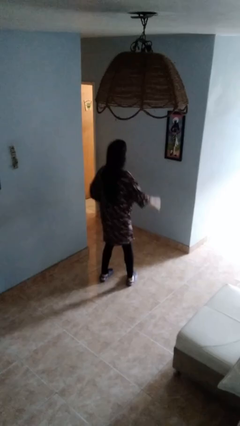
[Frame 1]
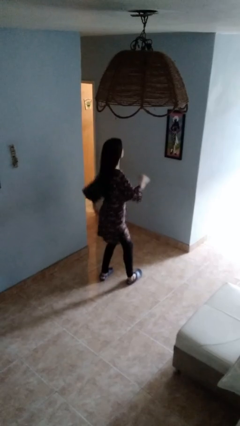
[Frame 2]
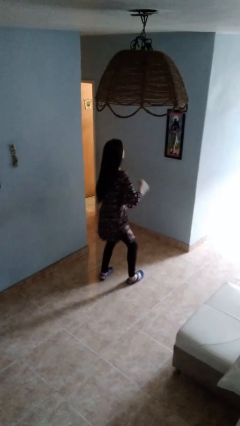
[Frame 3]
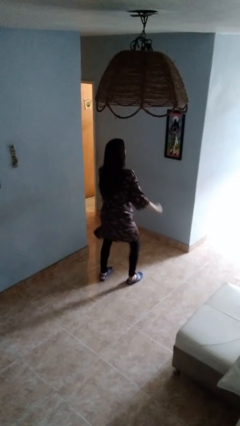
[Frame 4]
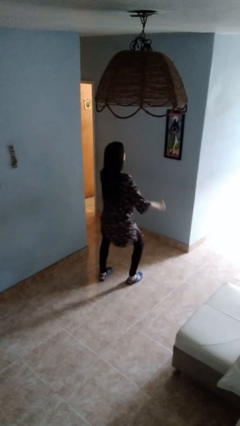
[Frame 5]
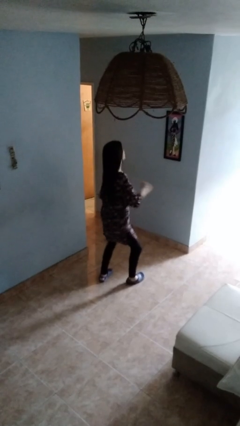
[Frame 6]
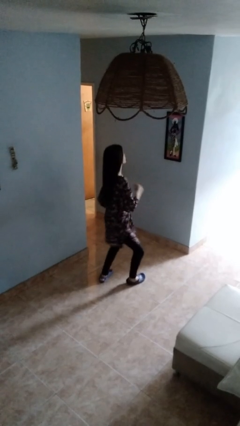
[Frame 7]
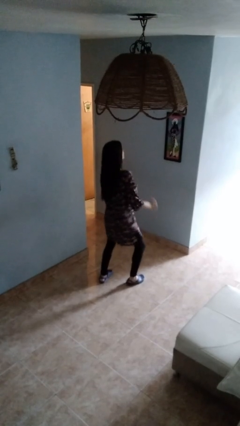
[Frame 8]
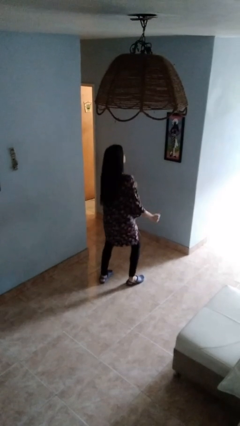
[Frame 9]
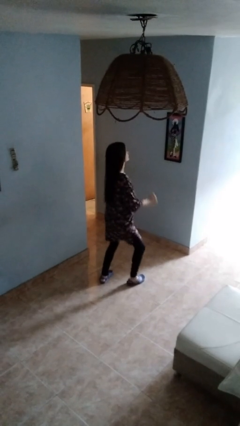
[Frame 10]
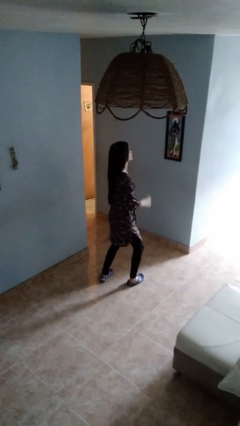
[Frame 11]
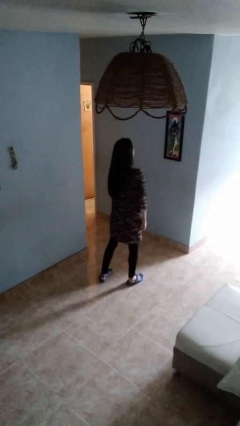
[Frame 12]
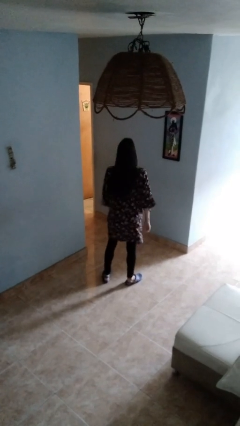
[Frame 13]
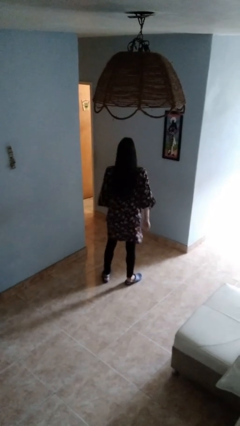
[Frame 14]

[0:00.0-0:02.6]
person dances in place

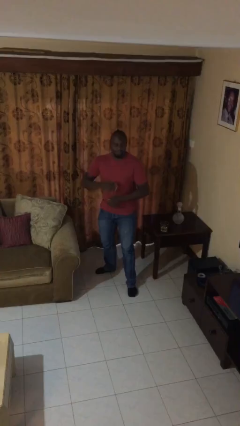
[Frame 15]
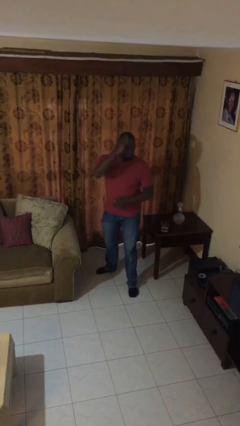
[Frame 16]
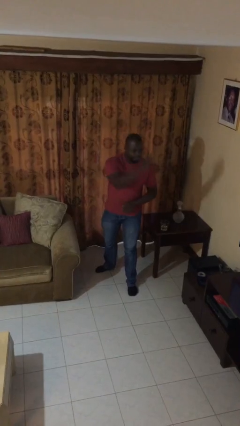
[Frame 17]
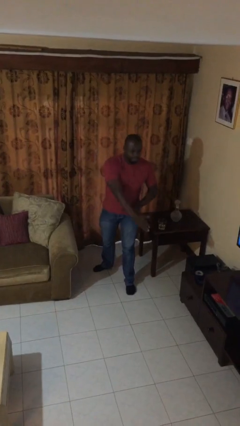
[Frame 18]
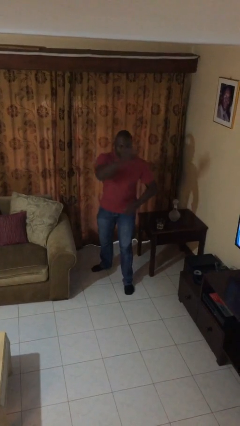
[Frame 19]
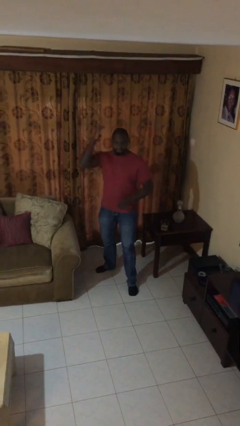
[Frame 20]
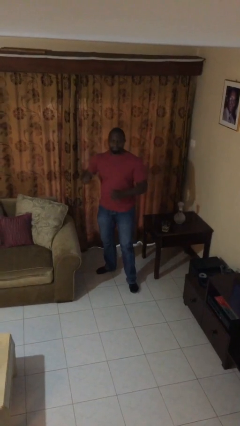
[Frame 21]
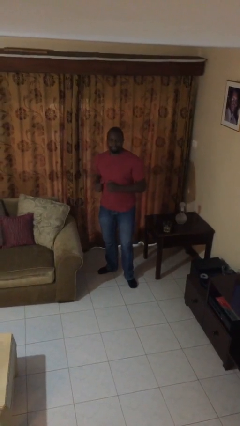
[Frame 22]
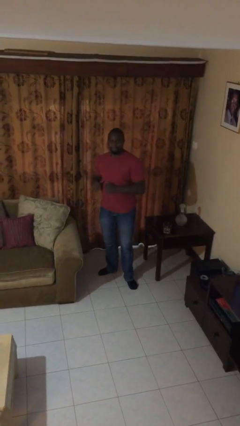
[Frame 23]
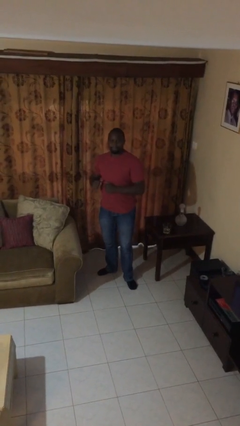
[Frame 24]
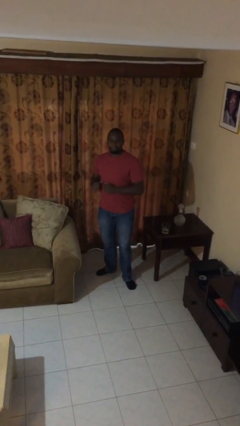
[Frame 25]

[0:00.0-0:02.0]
person karate chop

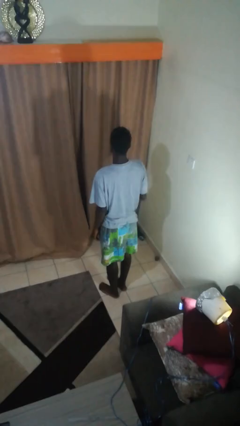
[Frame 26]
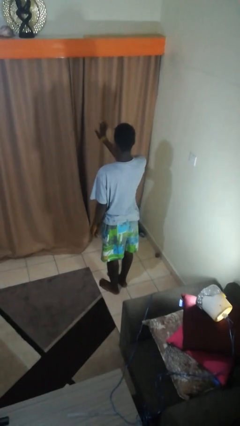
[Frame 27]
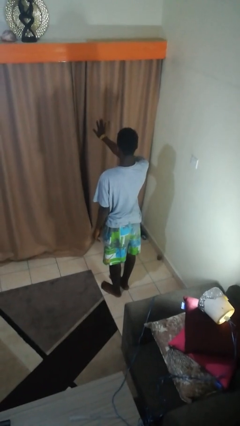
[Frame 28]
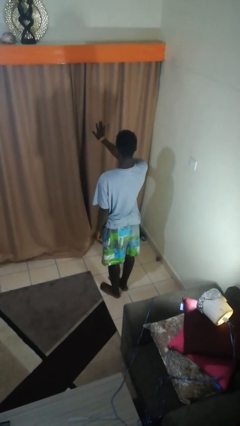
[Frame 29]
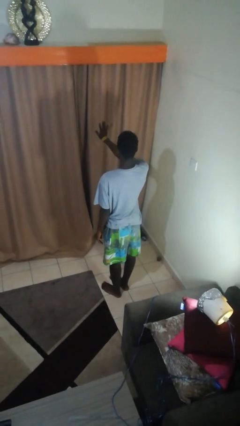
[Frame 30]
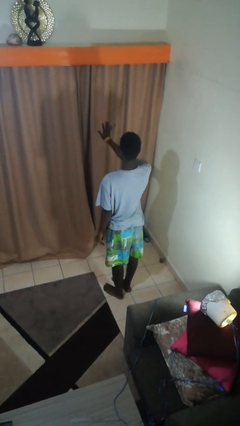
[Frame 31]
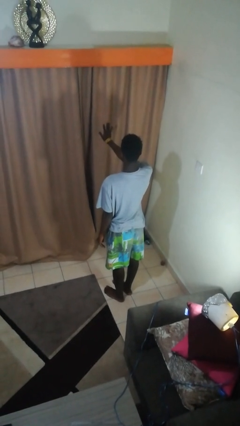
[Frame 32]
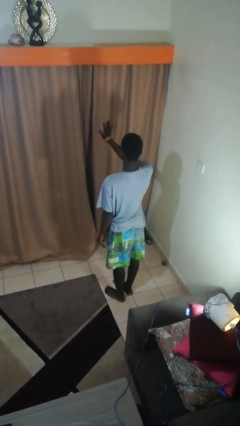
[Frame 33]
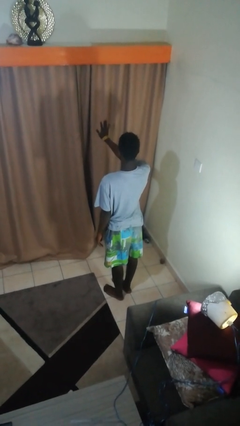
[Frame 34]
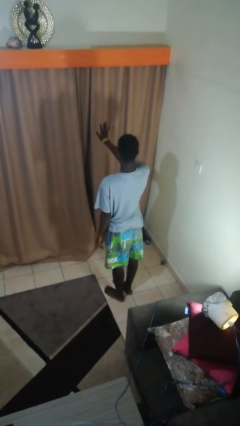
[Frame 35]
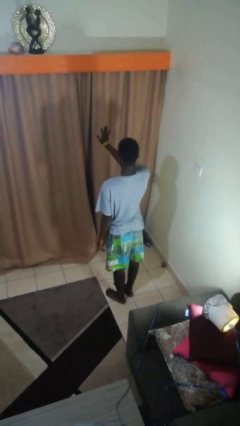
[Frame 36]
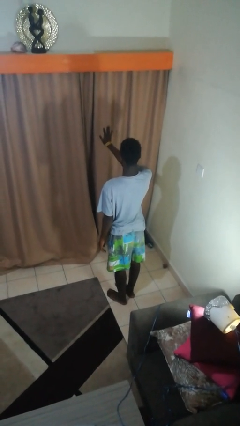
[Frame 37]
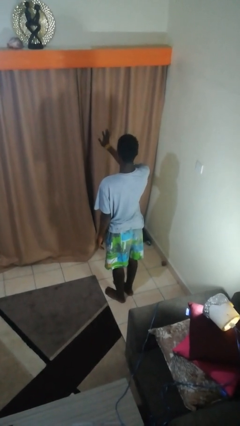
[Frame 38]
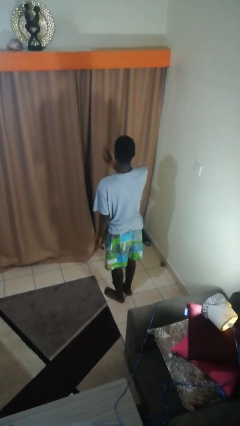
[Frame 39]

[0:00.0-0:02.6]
person gestures number five

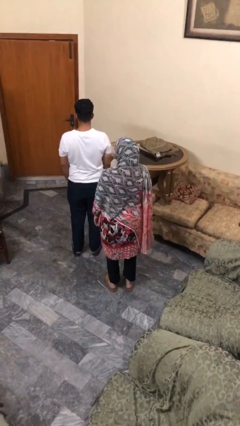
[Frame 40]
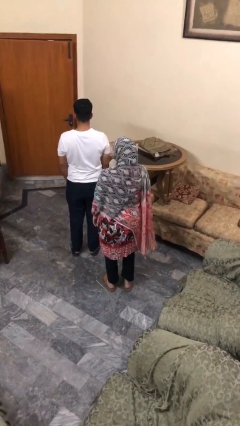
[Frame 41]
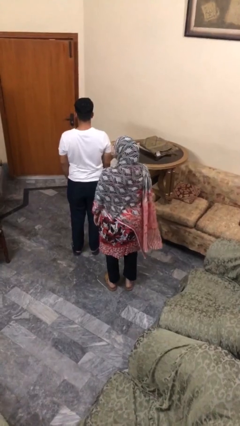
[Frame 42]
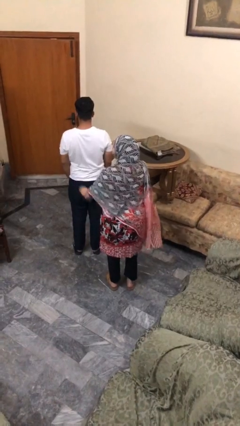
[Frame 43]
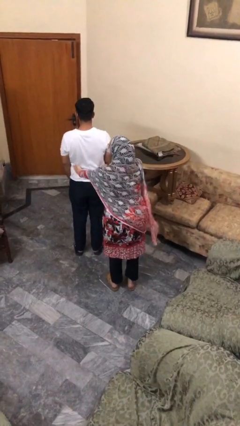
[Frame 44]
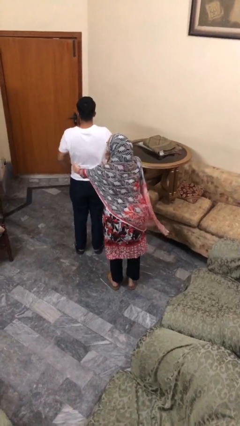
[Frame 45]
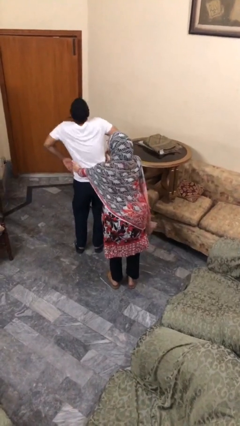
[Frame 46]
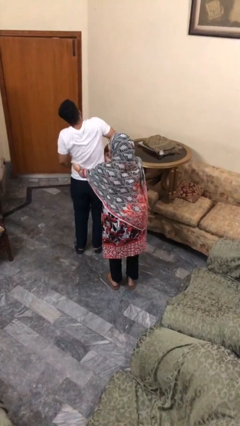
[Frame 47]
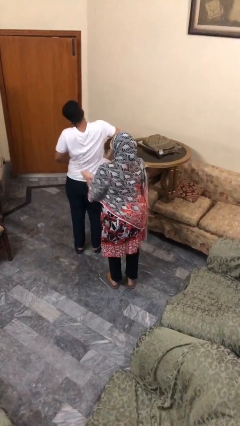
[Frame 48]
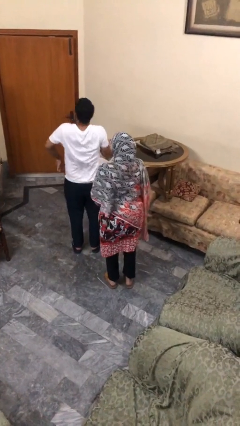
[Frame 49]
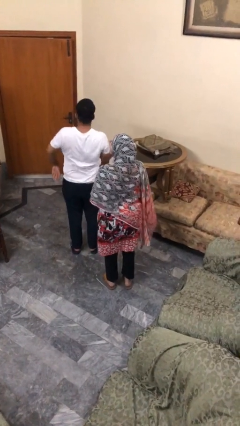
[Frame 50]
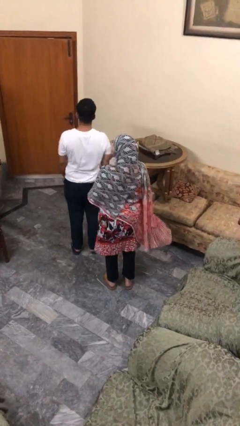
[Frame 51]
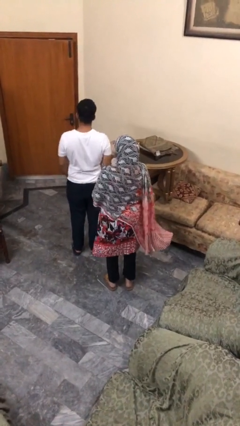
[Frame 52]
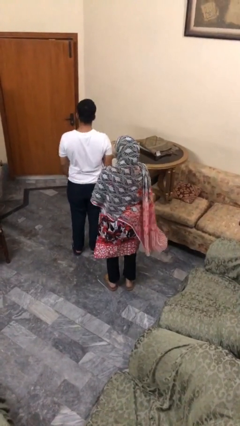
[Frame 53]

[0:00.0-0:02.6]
person tickles person

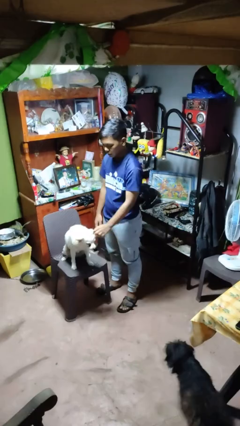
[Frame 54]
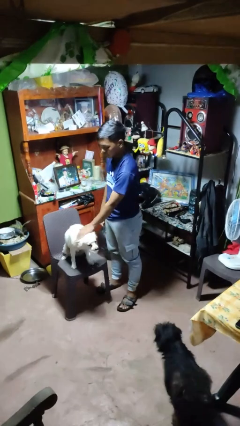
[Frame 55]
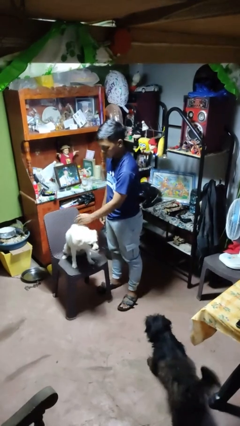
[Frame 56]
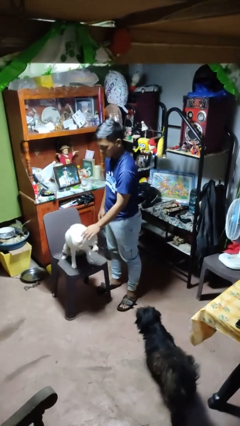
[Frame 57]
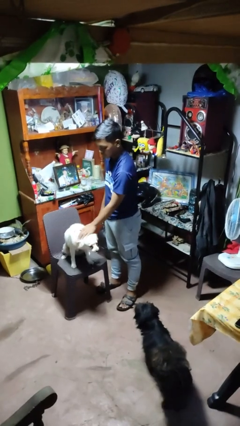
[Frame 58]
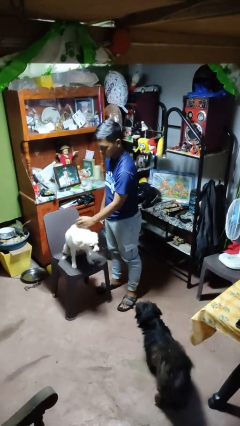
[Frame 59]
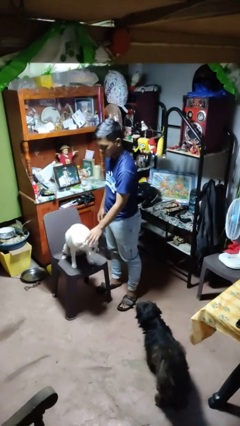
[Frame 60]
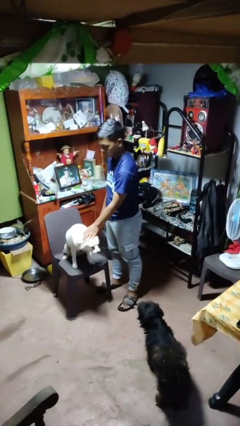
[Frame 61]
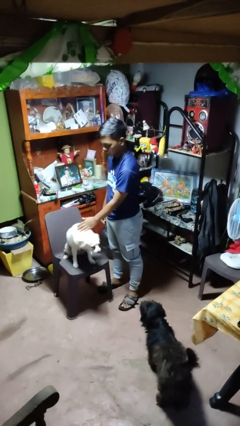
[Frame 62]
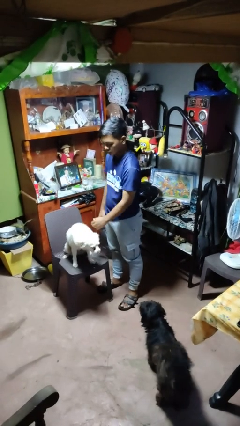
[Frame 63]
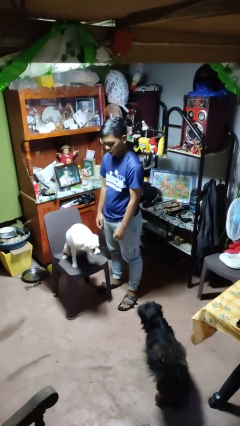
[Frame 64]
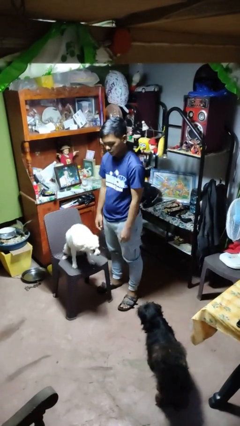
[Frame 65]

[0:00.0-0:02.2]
person pets dog

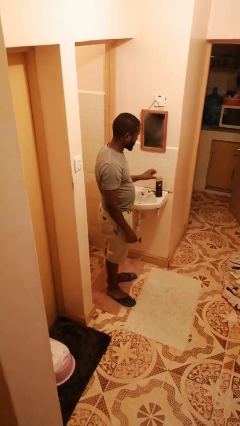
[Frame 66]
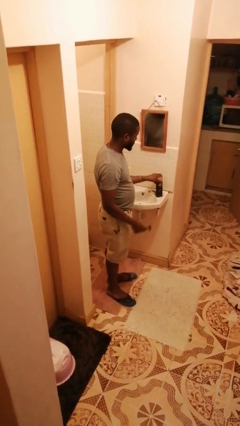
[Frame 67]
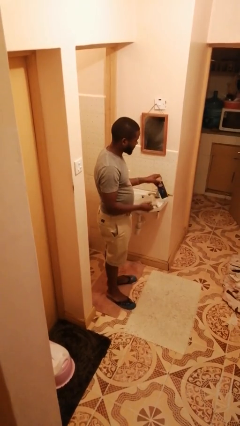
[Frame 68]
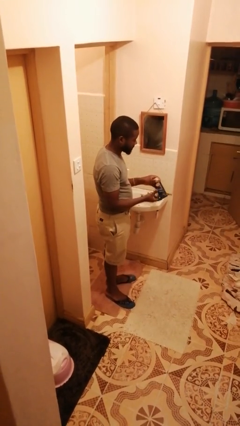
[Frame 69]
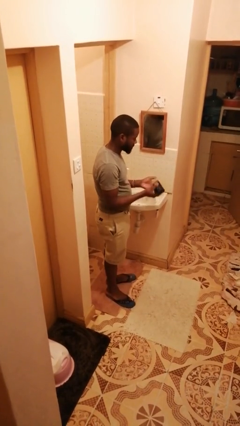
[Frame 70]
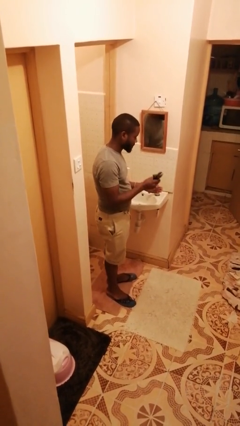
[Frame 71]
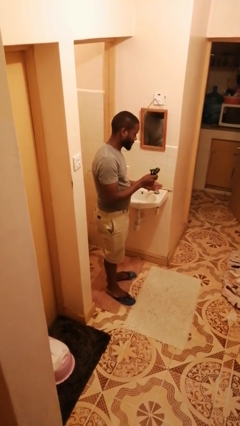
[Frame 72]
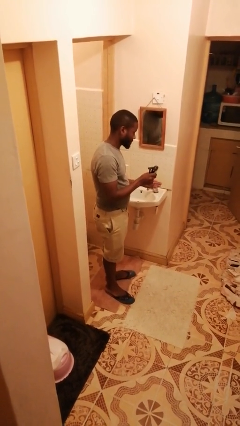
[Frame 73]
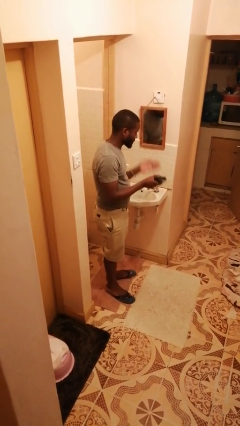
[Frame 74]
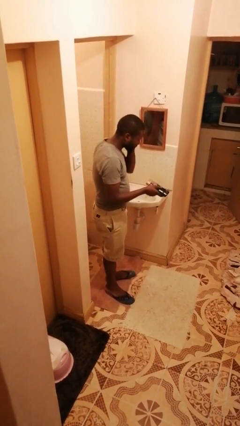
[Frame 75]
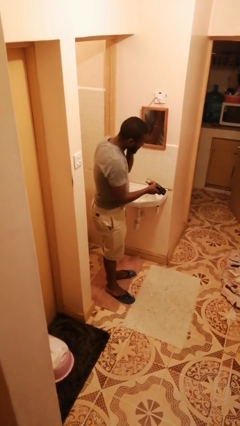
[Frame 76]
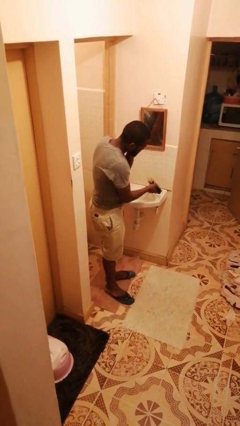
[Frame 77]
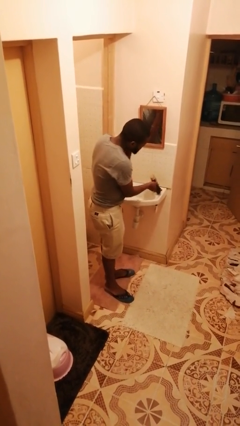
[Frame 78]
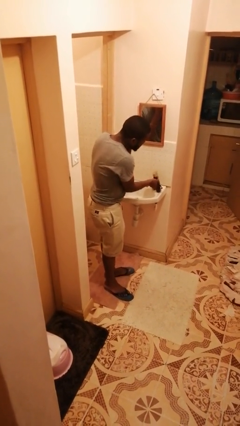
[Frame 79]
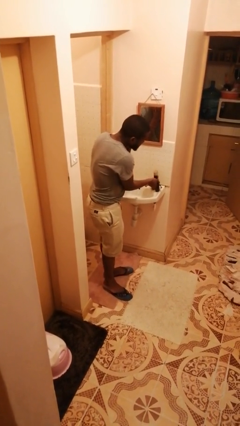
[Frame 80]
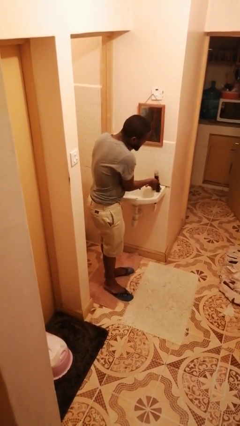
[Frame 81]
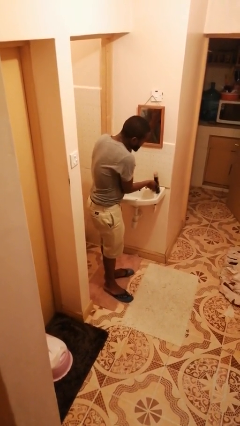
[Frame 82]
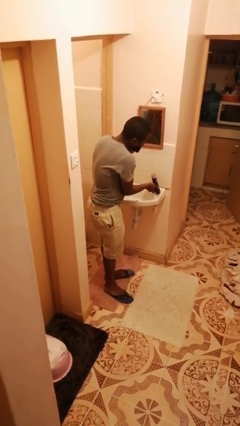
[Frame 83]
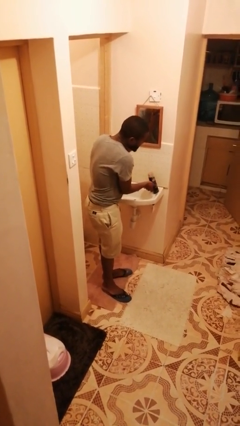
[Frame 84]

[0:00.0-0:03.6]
person applies shaving cream

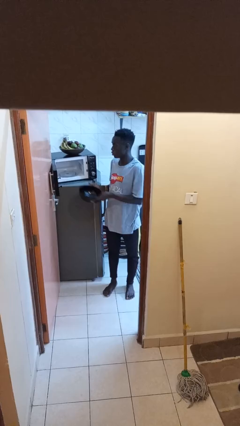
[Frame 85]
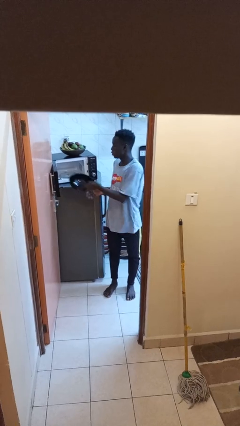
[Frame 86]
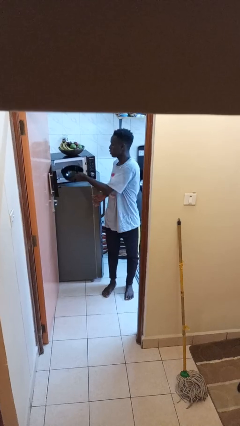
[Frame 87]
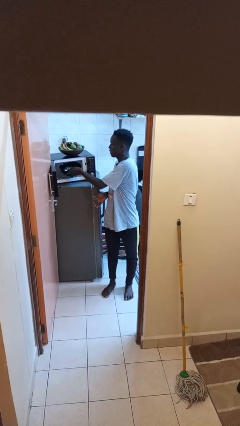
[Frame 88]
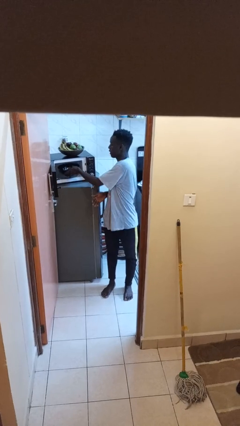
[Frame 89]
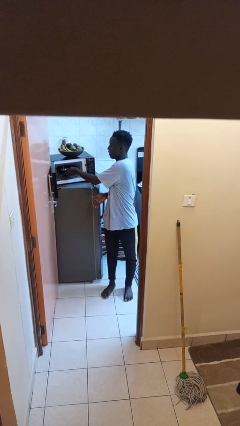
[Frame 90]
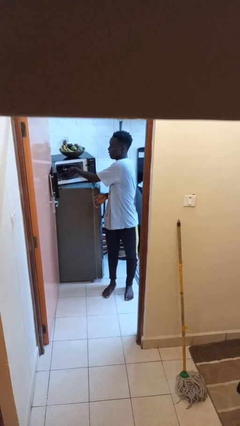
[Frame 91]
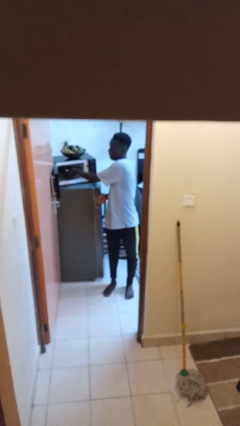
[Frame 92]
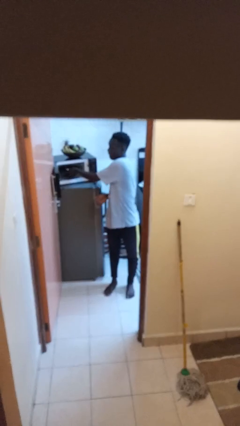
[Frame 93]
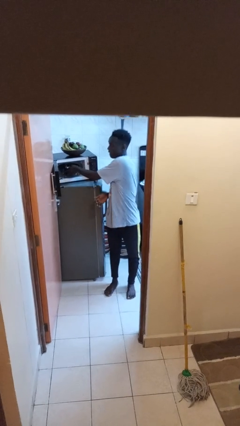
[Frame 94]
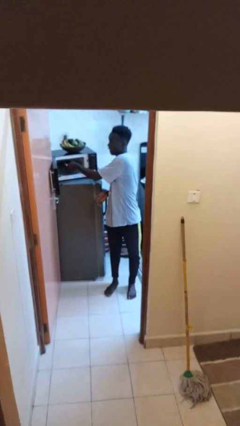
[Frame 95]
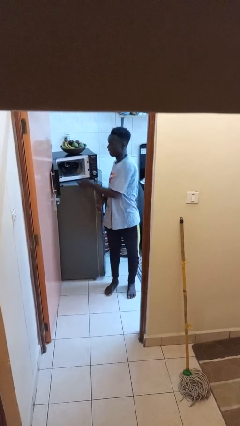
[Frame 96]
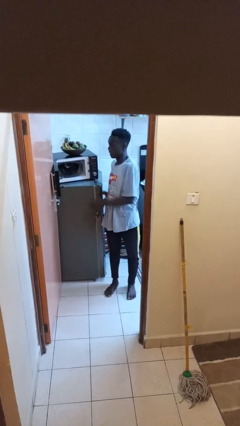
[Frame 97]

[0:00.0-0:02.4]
person puts object into microwave
